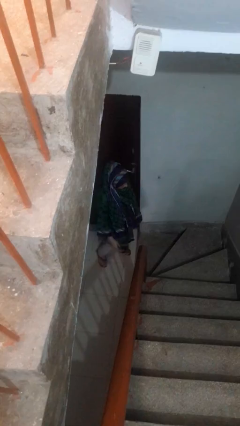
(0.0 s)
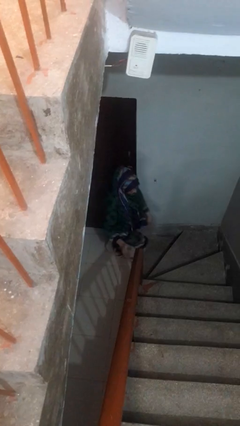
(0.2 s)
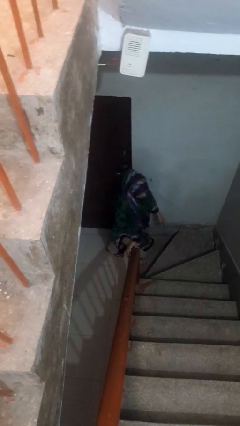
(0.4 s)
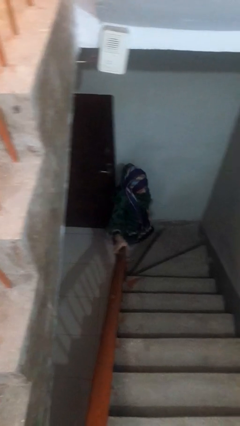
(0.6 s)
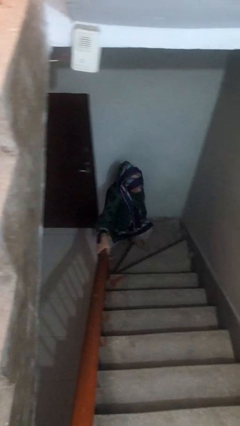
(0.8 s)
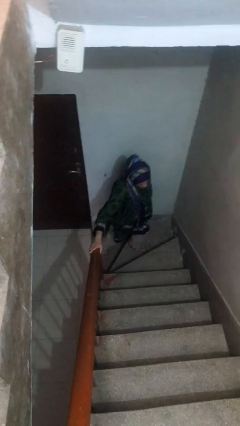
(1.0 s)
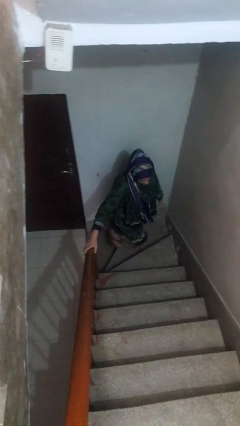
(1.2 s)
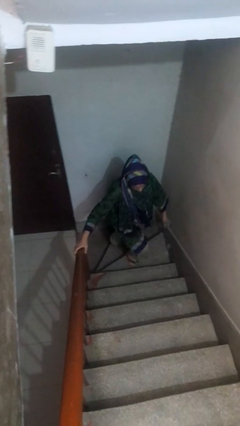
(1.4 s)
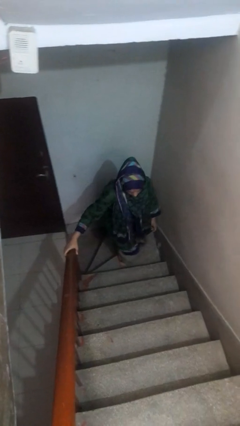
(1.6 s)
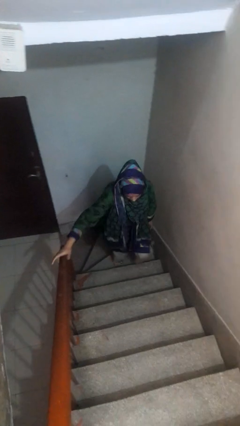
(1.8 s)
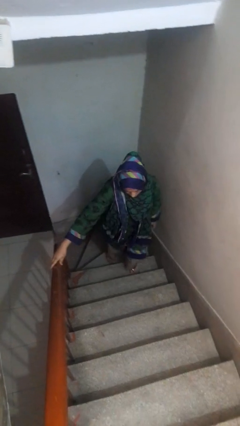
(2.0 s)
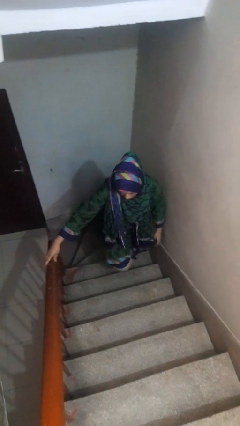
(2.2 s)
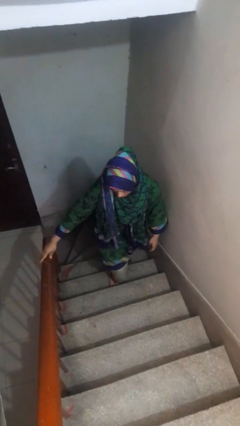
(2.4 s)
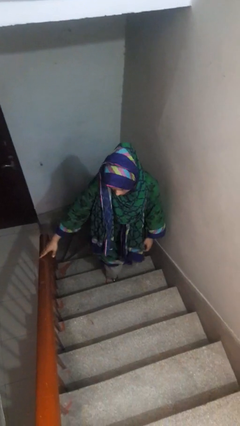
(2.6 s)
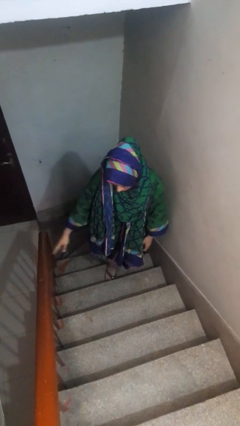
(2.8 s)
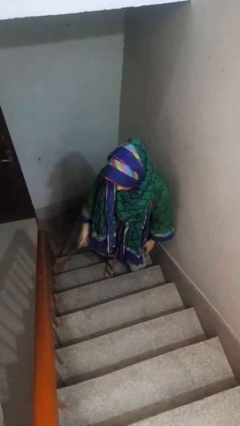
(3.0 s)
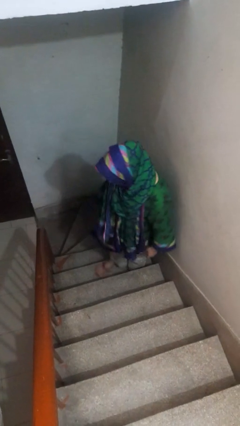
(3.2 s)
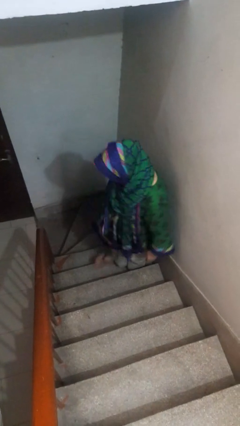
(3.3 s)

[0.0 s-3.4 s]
person climbs up stairs

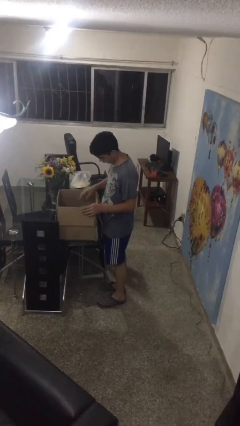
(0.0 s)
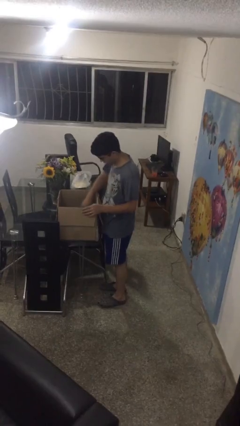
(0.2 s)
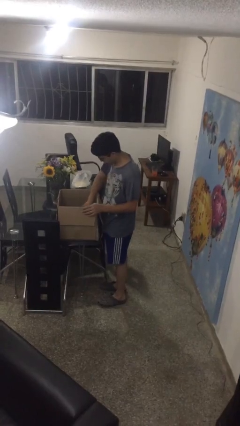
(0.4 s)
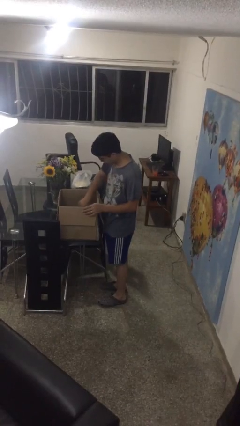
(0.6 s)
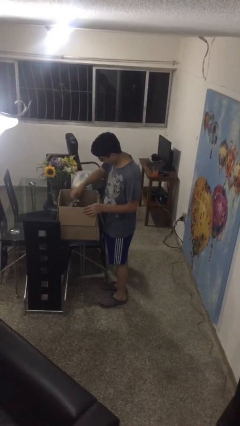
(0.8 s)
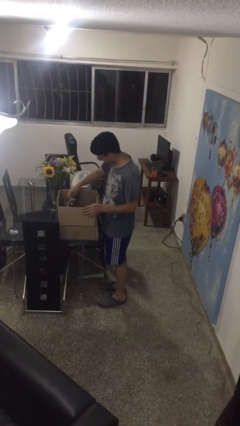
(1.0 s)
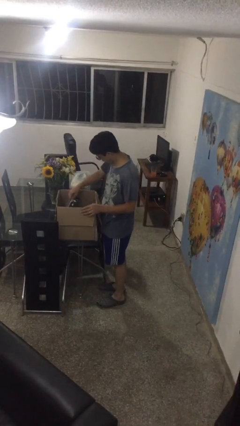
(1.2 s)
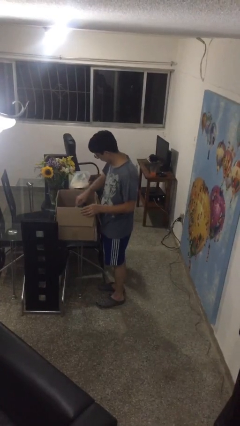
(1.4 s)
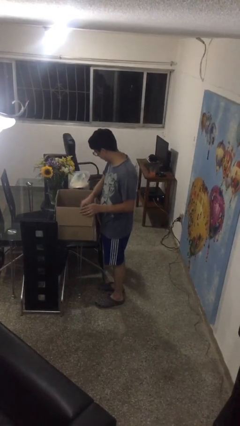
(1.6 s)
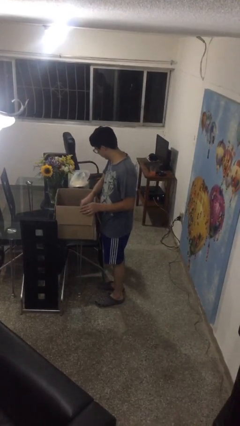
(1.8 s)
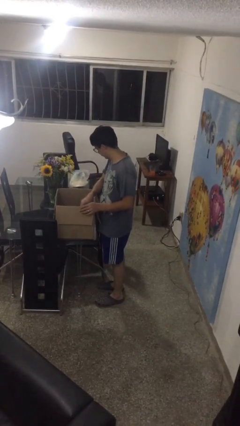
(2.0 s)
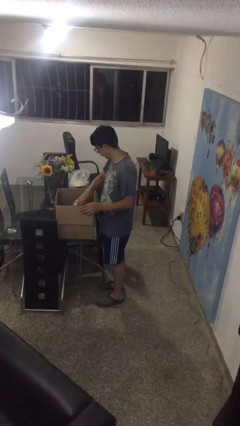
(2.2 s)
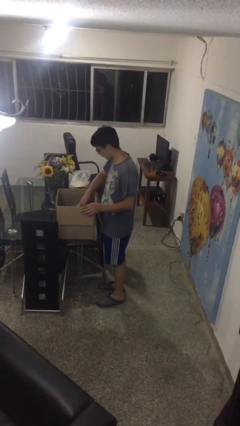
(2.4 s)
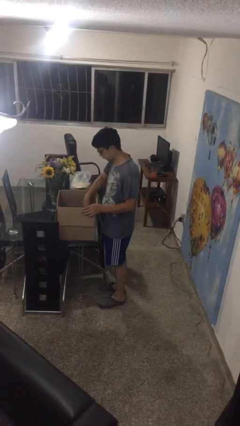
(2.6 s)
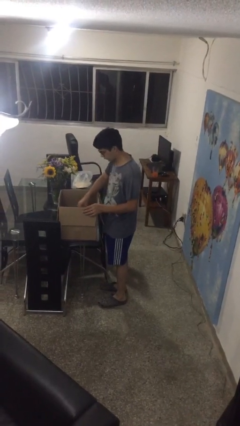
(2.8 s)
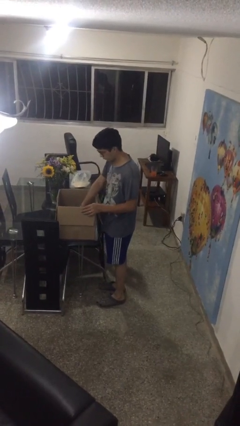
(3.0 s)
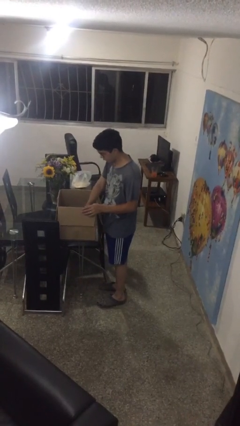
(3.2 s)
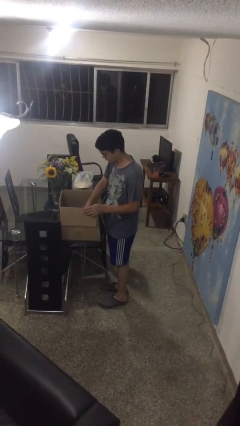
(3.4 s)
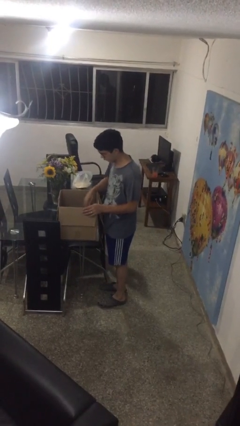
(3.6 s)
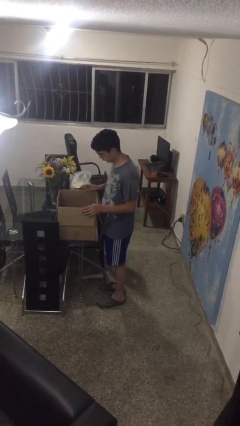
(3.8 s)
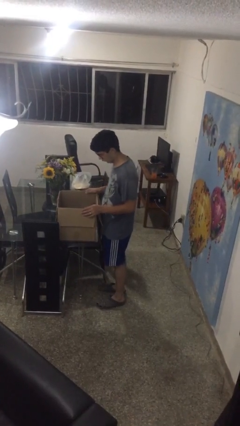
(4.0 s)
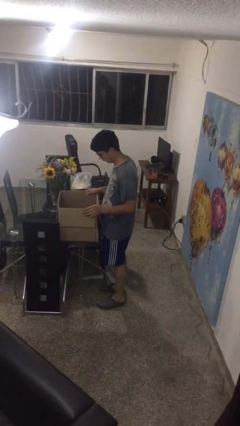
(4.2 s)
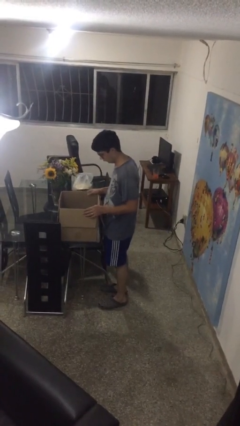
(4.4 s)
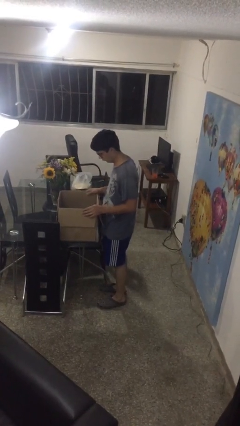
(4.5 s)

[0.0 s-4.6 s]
person searches in box

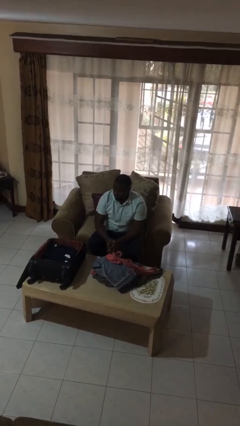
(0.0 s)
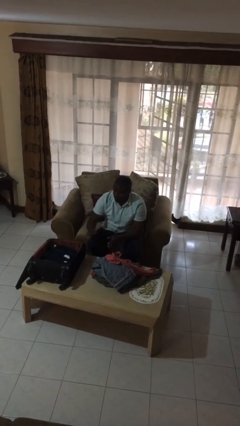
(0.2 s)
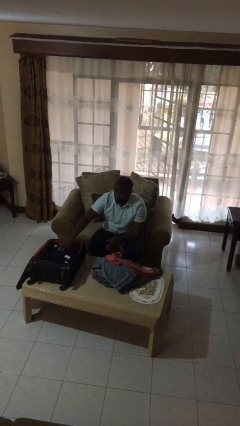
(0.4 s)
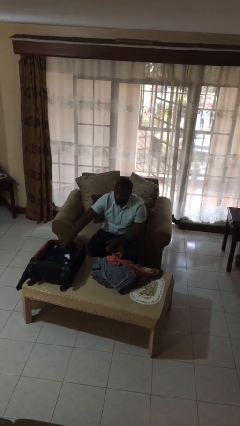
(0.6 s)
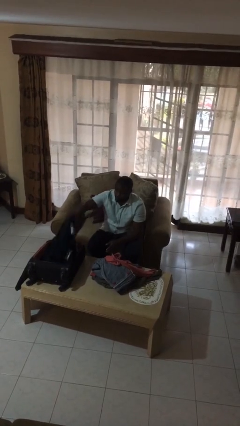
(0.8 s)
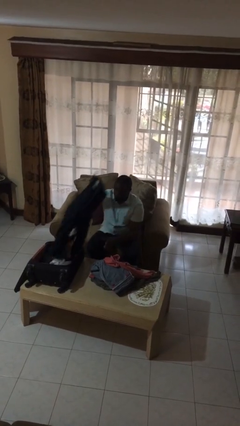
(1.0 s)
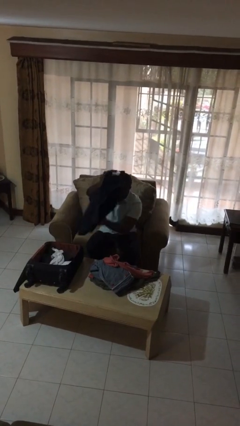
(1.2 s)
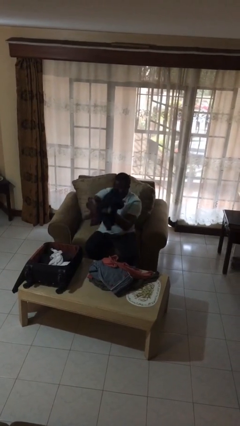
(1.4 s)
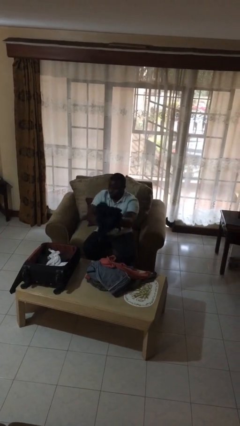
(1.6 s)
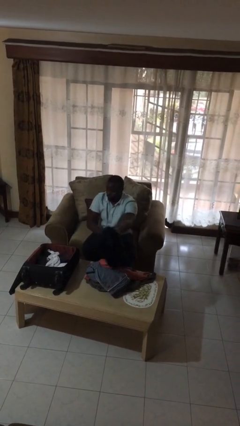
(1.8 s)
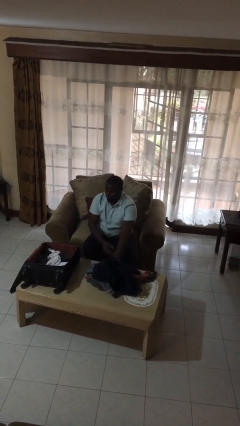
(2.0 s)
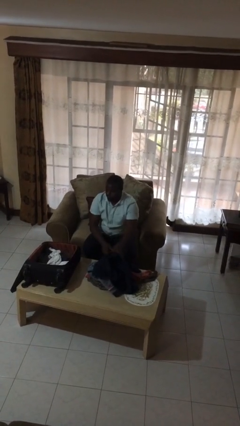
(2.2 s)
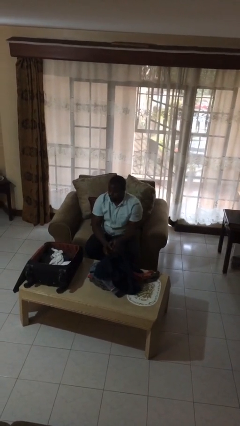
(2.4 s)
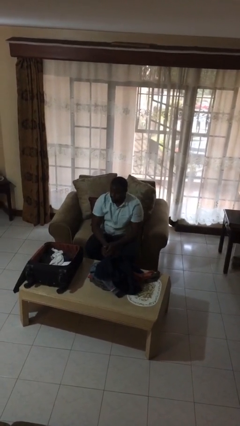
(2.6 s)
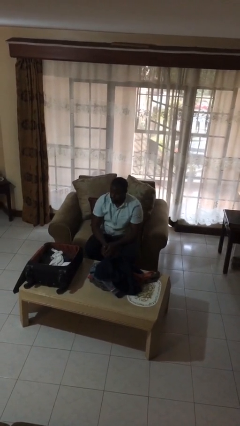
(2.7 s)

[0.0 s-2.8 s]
person unloads clothes from suitcase

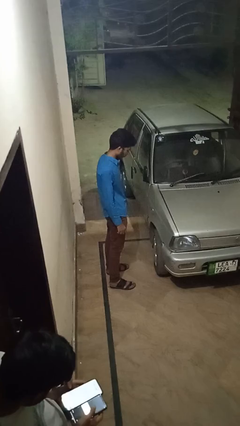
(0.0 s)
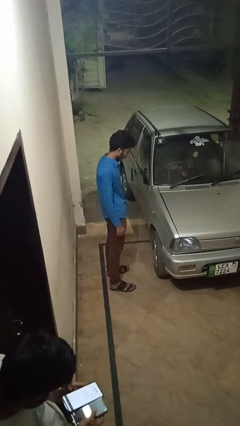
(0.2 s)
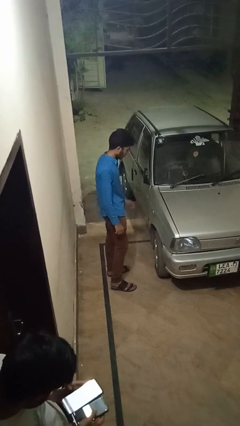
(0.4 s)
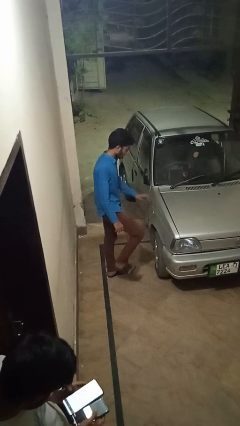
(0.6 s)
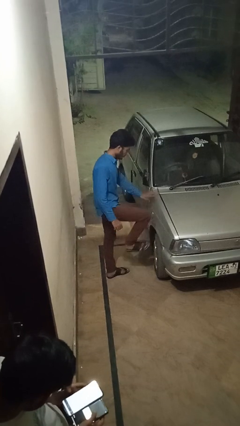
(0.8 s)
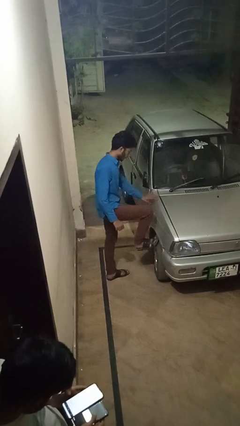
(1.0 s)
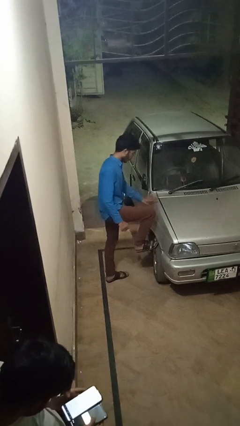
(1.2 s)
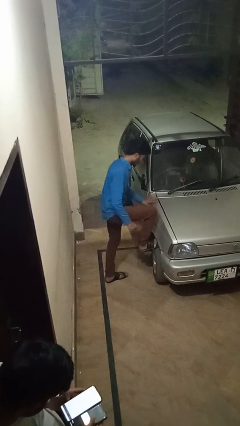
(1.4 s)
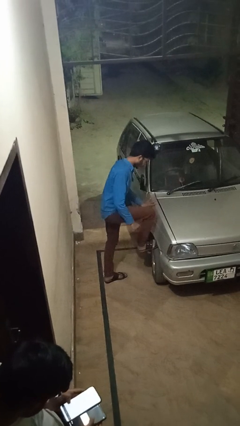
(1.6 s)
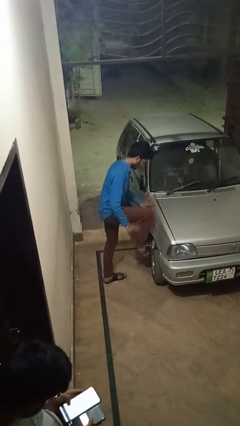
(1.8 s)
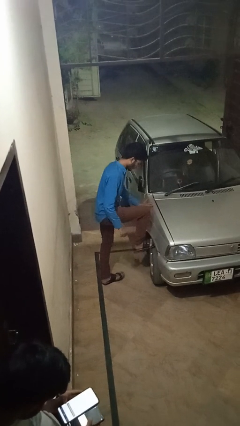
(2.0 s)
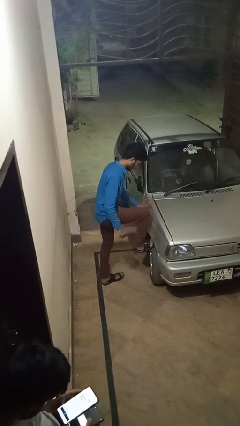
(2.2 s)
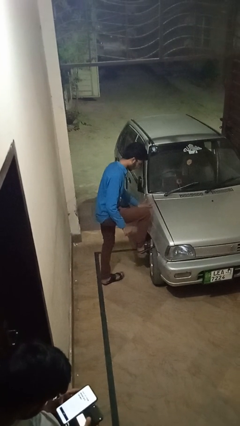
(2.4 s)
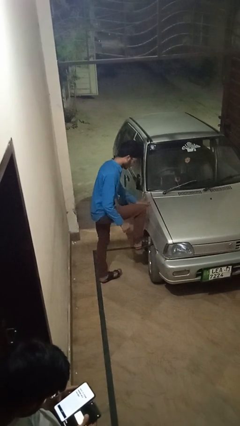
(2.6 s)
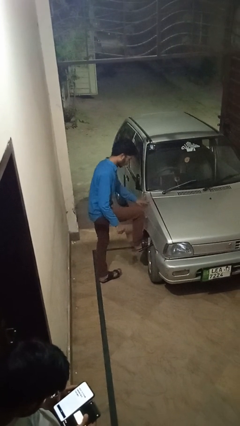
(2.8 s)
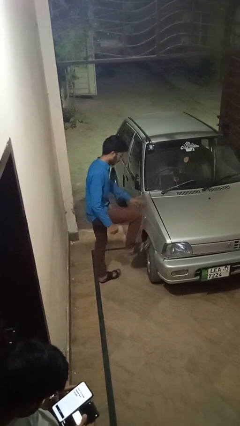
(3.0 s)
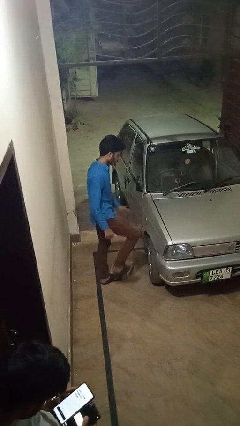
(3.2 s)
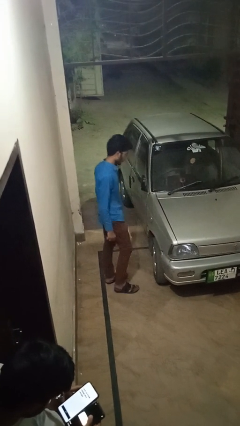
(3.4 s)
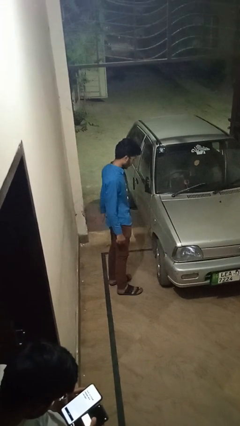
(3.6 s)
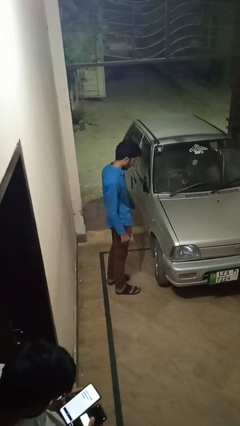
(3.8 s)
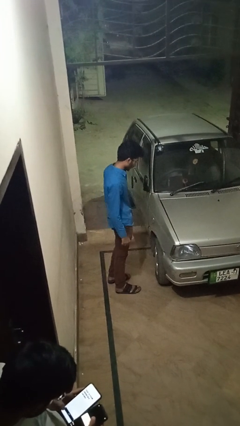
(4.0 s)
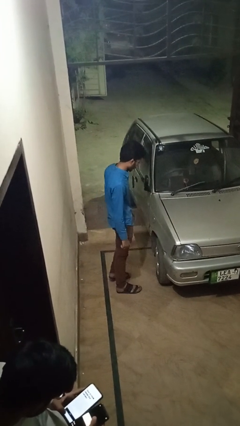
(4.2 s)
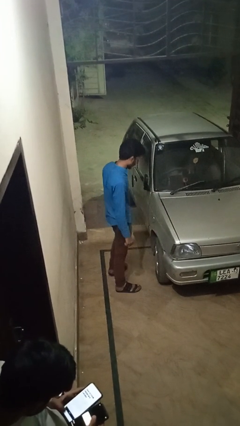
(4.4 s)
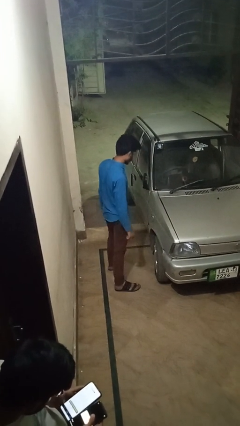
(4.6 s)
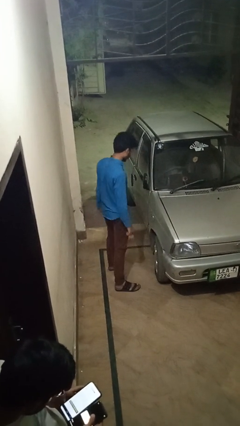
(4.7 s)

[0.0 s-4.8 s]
person kicks car tires

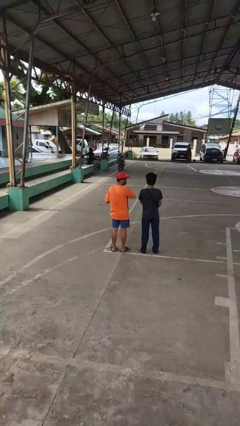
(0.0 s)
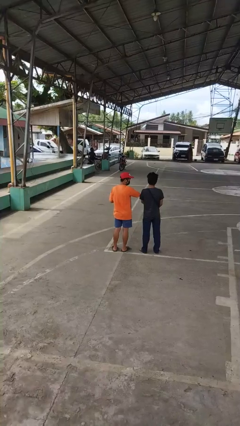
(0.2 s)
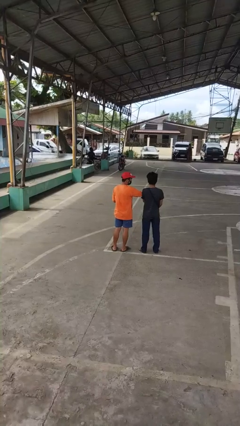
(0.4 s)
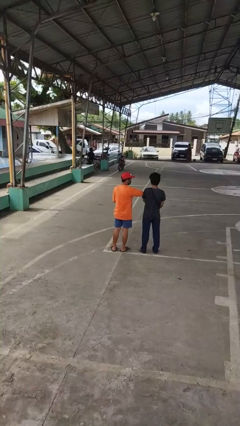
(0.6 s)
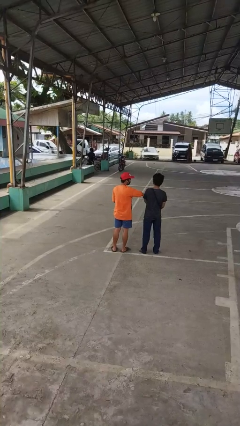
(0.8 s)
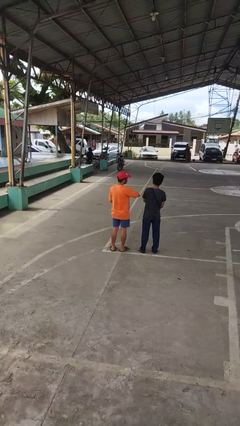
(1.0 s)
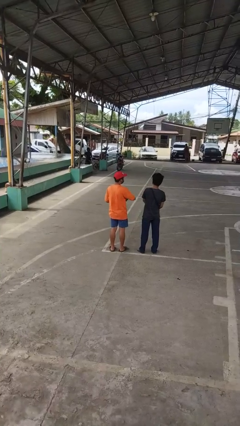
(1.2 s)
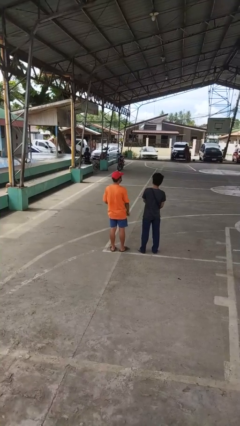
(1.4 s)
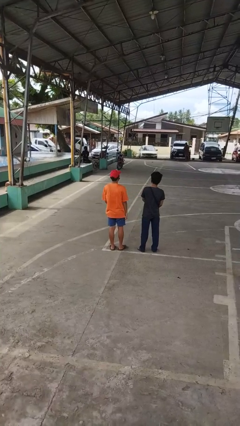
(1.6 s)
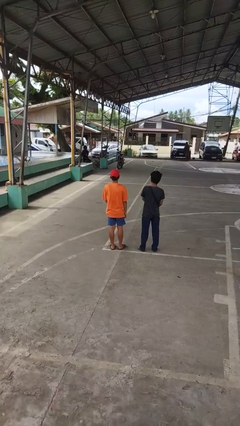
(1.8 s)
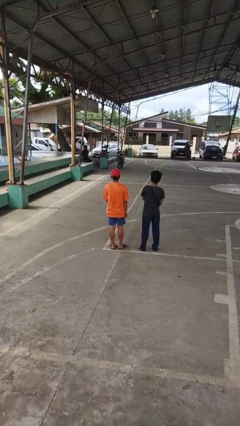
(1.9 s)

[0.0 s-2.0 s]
person nudges person with elbow

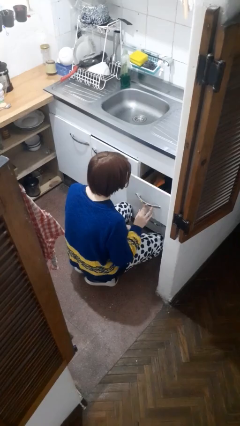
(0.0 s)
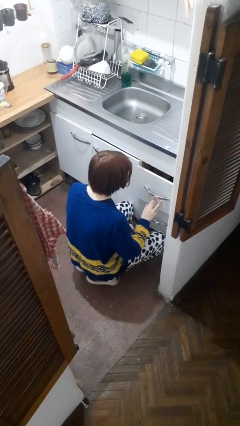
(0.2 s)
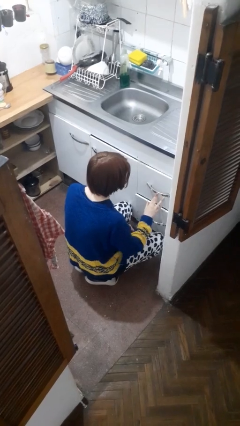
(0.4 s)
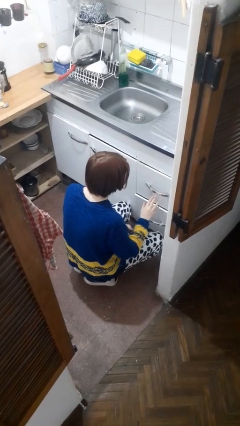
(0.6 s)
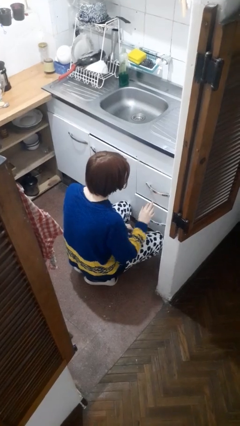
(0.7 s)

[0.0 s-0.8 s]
person closes kitchen drawer
